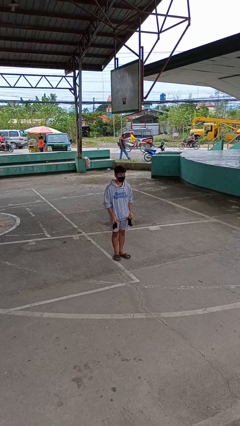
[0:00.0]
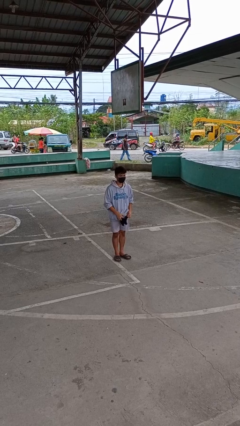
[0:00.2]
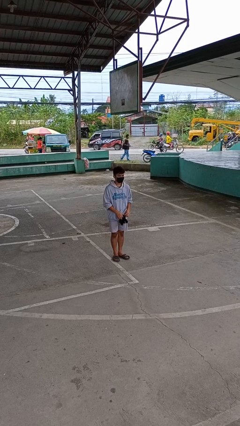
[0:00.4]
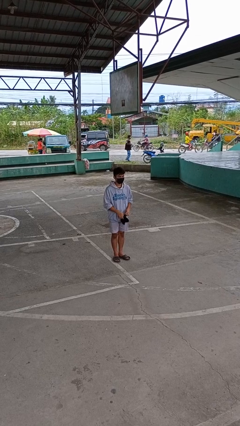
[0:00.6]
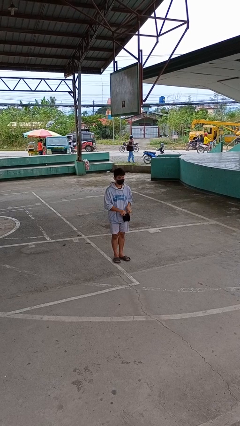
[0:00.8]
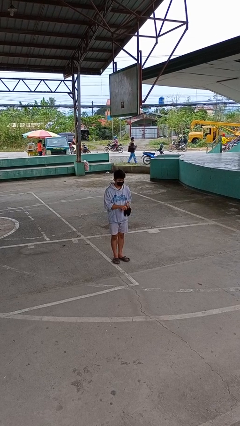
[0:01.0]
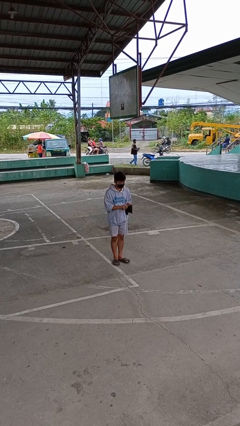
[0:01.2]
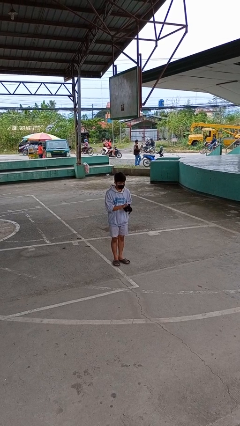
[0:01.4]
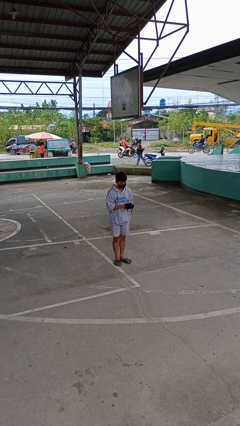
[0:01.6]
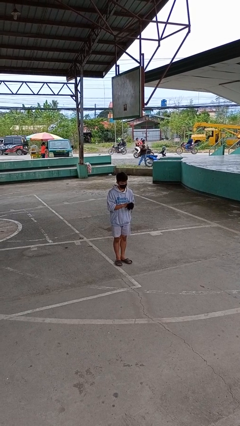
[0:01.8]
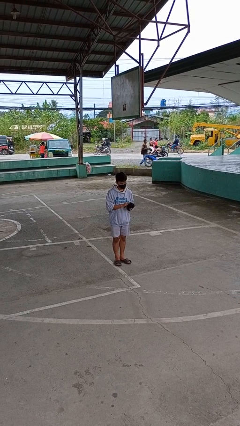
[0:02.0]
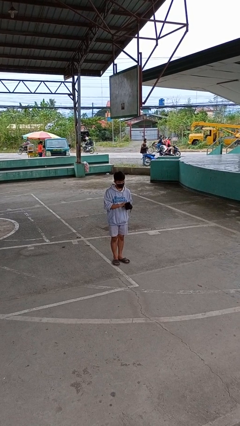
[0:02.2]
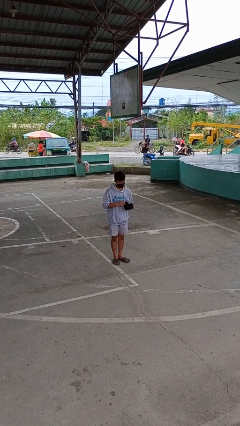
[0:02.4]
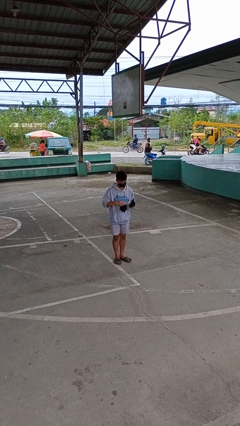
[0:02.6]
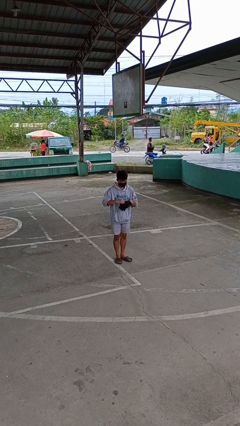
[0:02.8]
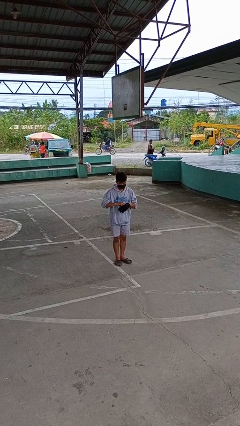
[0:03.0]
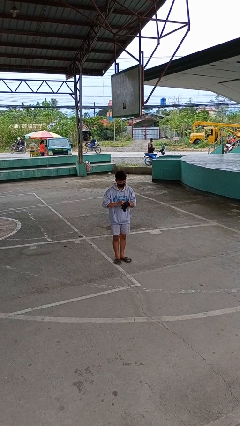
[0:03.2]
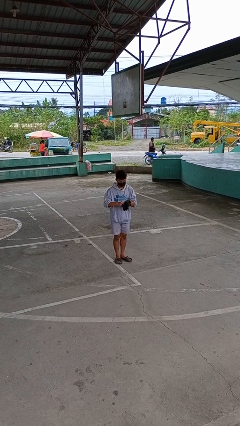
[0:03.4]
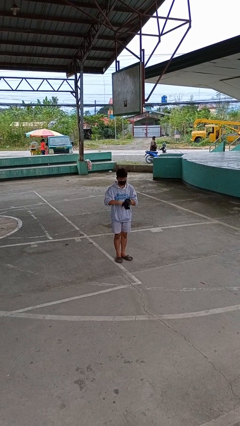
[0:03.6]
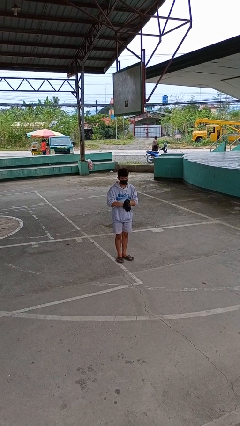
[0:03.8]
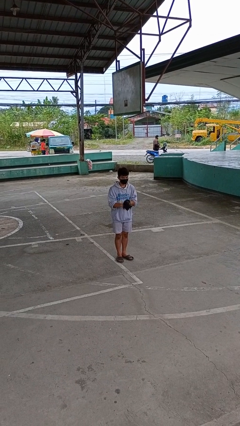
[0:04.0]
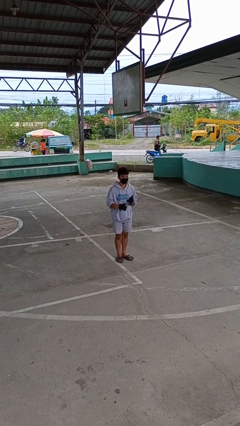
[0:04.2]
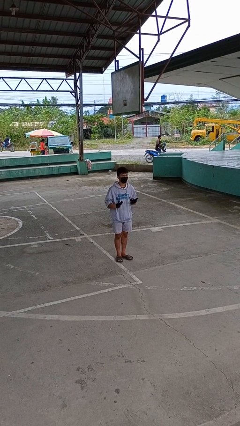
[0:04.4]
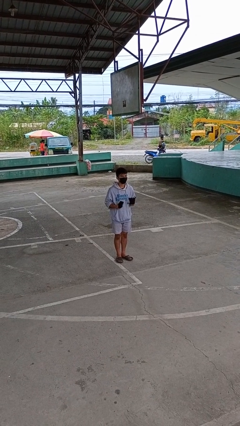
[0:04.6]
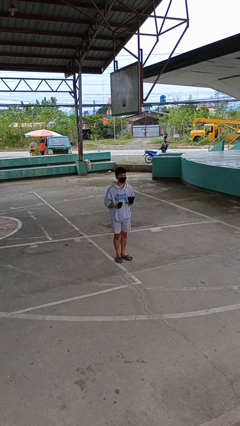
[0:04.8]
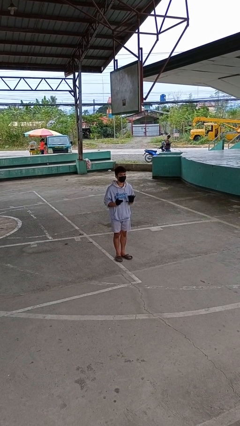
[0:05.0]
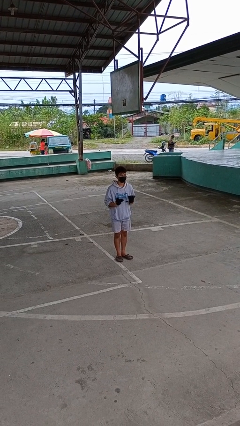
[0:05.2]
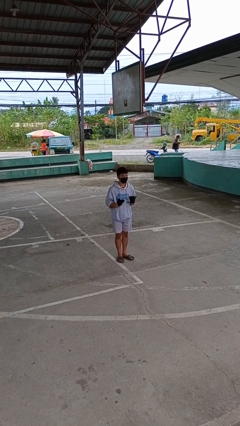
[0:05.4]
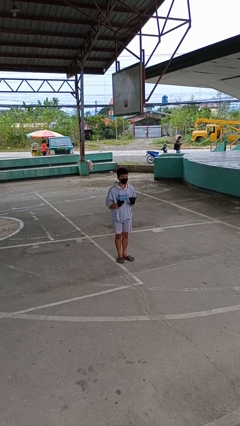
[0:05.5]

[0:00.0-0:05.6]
person puts on gloves

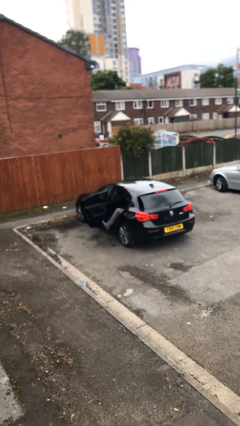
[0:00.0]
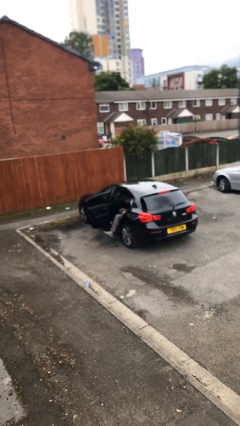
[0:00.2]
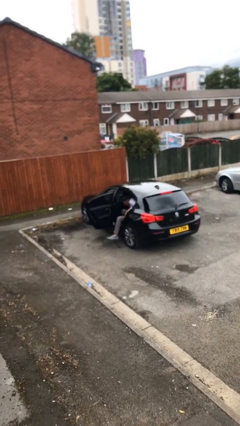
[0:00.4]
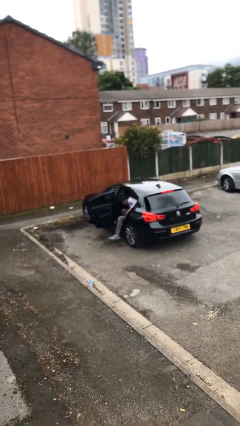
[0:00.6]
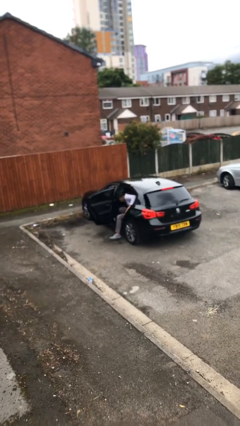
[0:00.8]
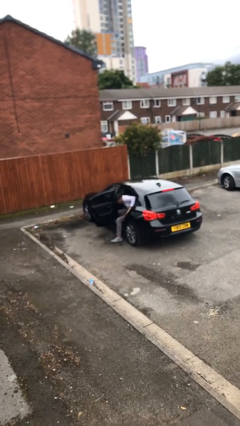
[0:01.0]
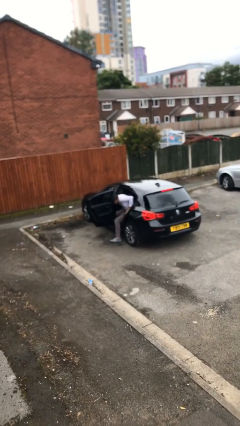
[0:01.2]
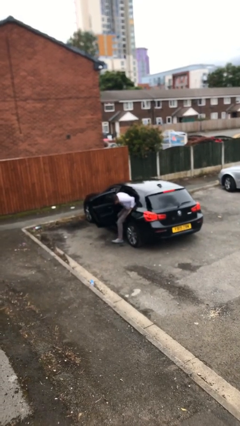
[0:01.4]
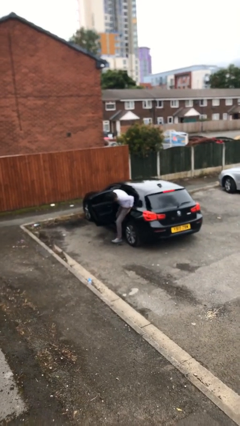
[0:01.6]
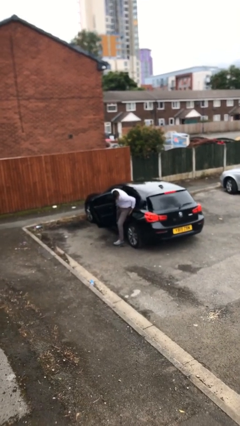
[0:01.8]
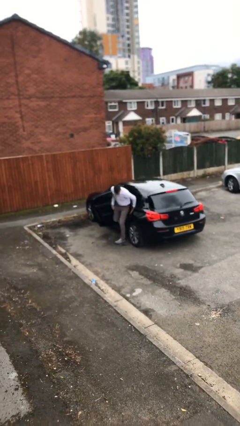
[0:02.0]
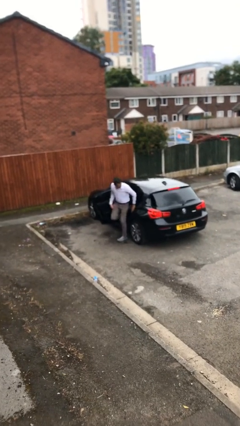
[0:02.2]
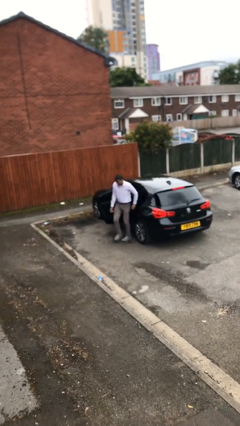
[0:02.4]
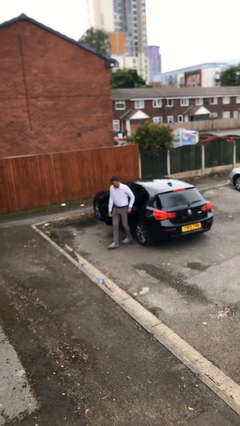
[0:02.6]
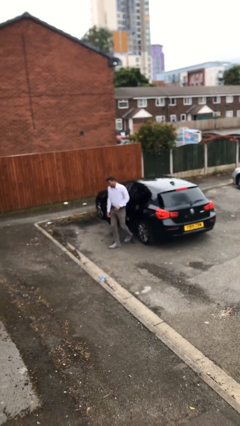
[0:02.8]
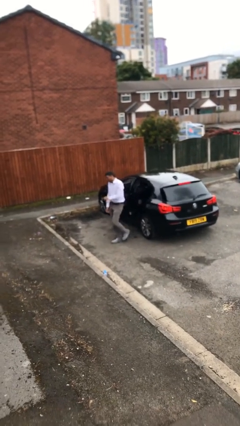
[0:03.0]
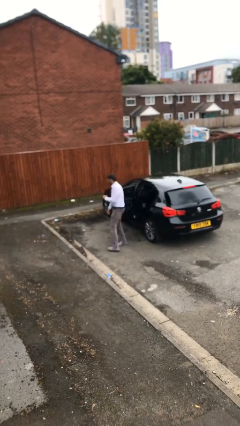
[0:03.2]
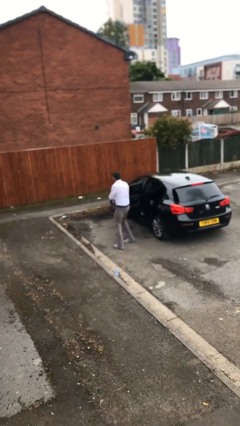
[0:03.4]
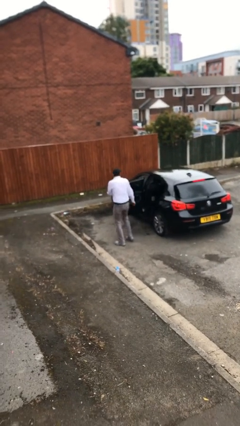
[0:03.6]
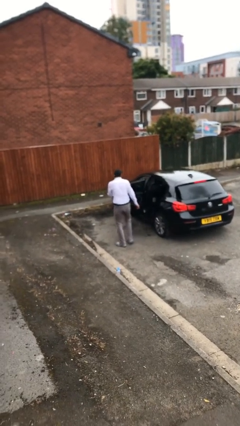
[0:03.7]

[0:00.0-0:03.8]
person exits car

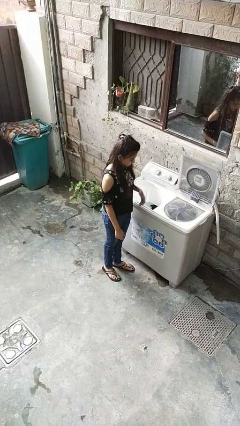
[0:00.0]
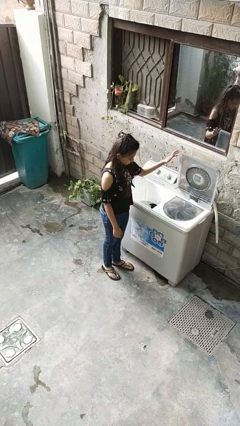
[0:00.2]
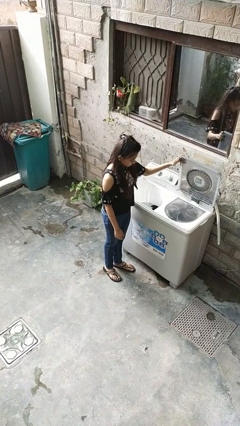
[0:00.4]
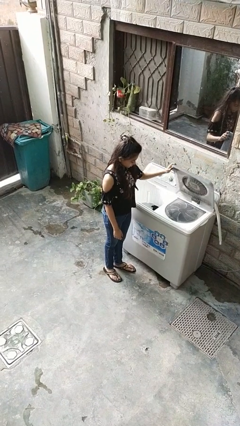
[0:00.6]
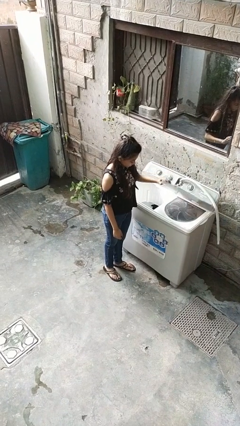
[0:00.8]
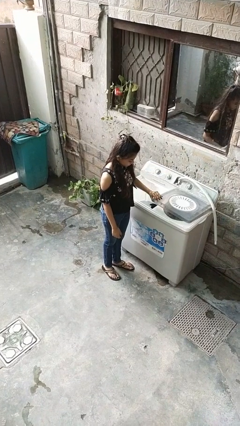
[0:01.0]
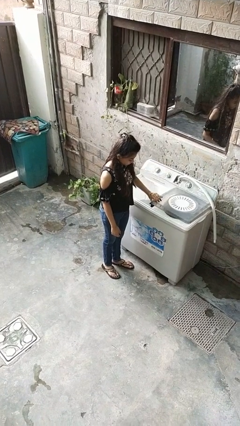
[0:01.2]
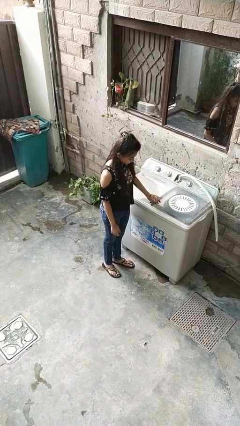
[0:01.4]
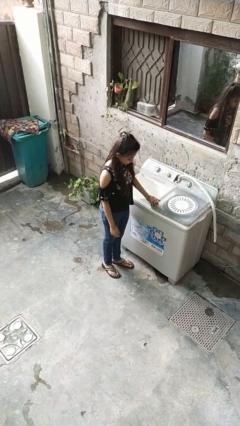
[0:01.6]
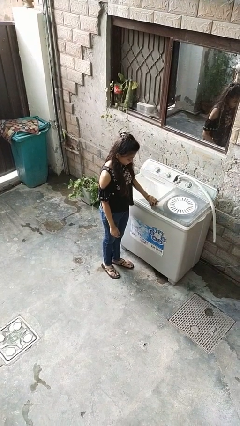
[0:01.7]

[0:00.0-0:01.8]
person closes clothes washer

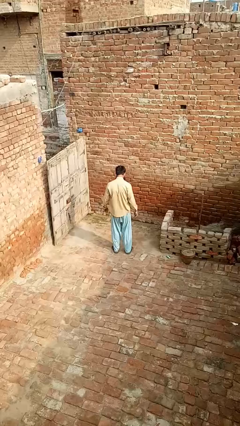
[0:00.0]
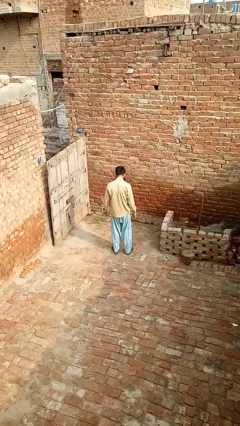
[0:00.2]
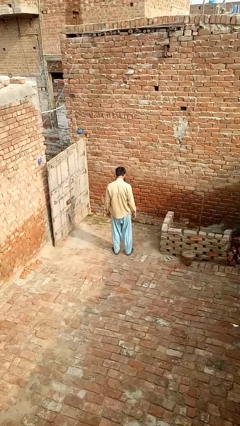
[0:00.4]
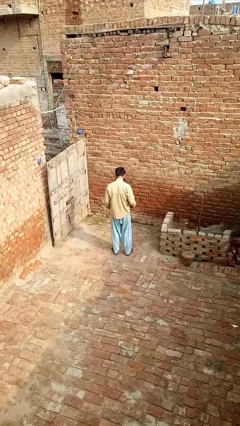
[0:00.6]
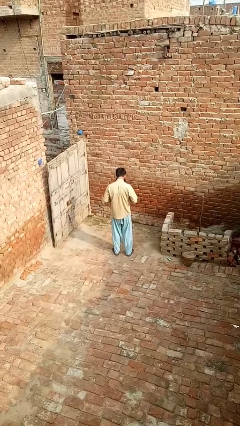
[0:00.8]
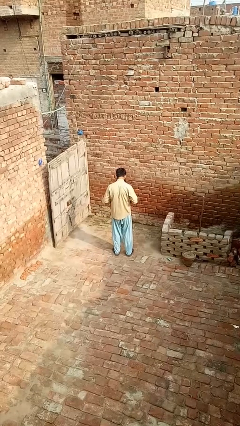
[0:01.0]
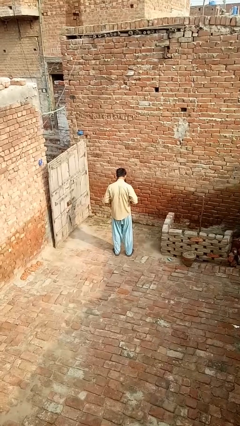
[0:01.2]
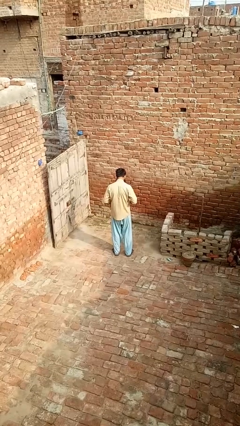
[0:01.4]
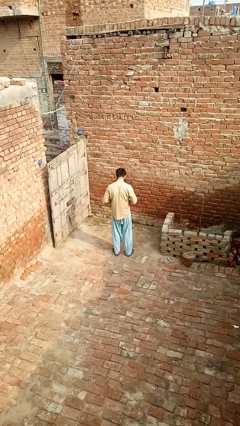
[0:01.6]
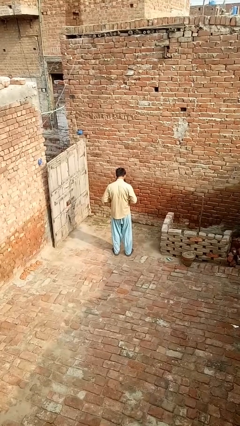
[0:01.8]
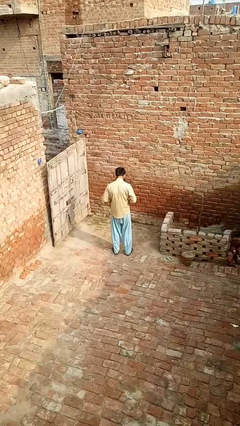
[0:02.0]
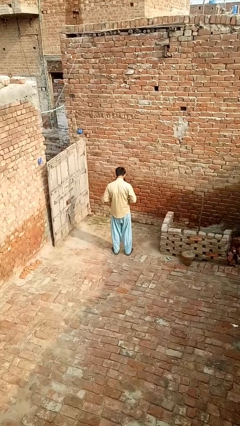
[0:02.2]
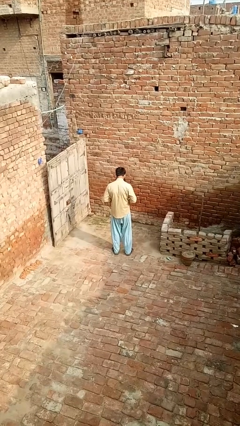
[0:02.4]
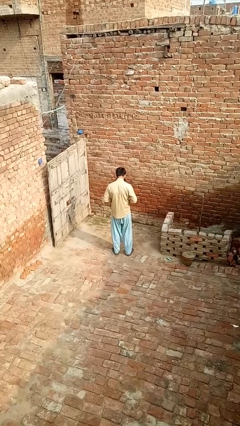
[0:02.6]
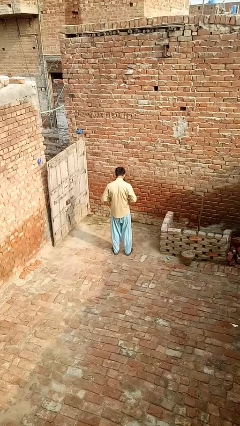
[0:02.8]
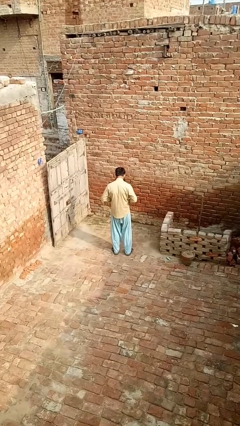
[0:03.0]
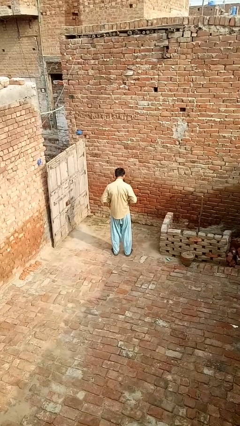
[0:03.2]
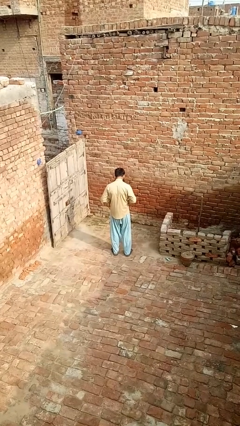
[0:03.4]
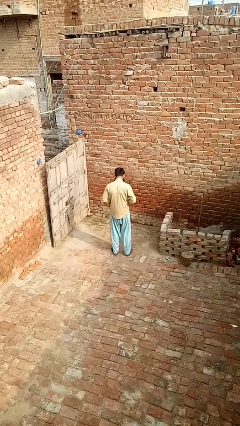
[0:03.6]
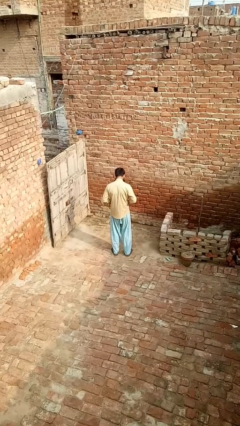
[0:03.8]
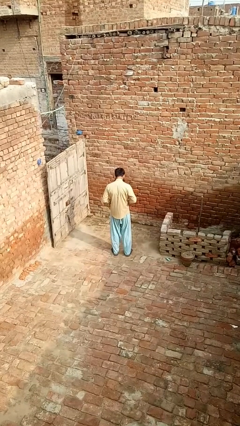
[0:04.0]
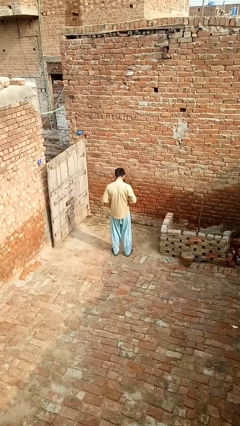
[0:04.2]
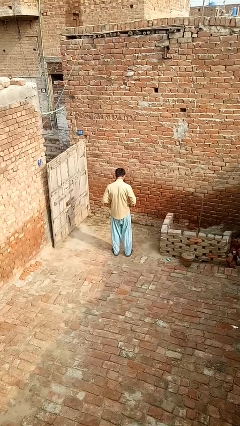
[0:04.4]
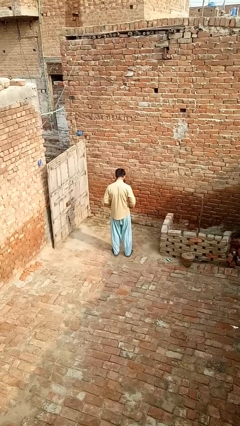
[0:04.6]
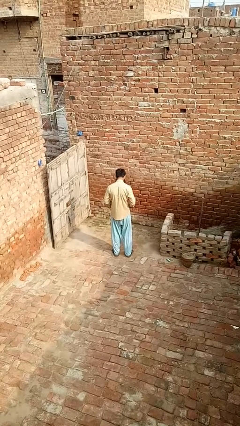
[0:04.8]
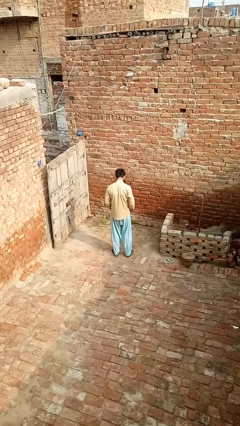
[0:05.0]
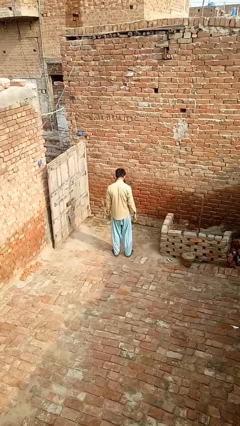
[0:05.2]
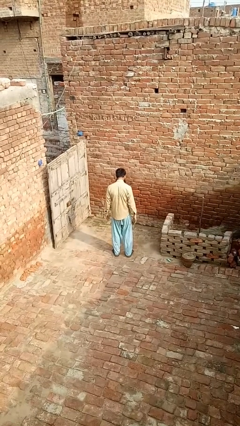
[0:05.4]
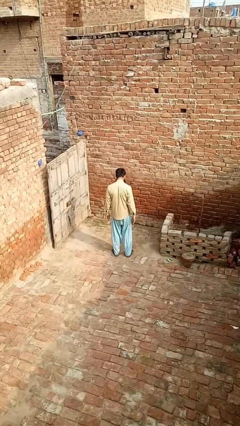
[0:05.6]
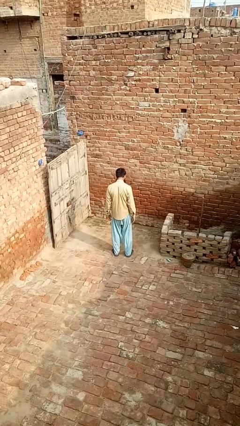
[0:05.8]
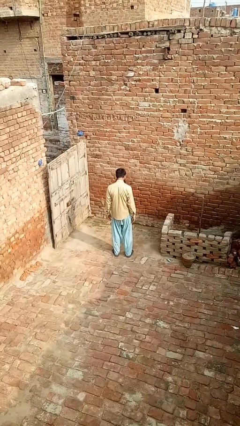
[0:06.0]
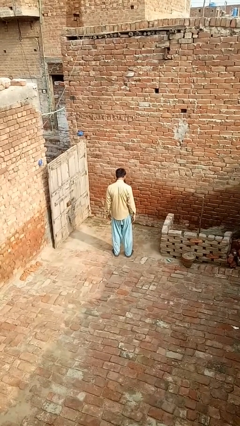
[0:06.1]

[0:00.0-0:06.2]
person buttons shirt

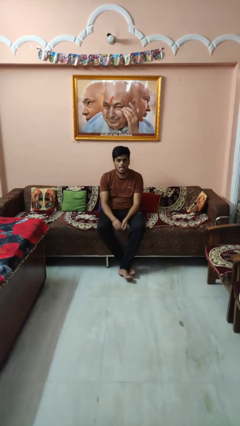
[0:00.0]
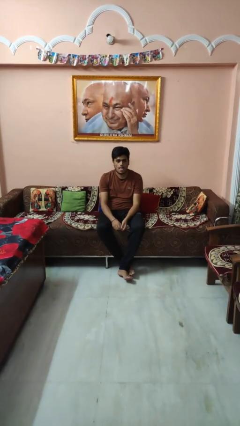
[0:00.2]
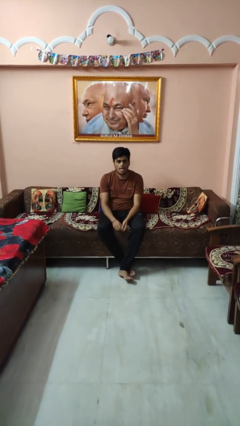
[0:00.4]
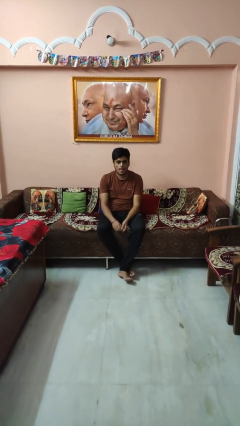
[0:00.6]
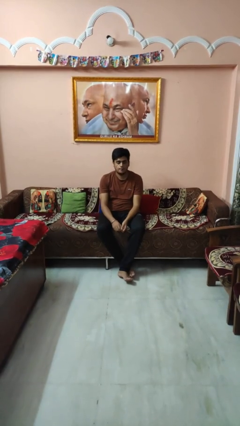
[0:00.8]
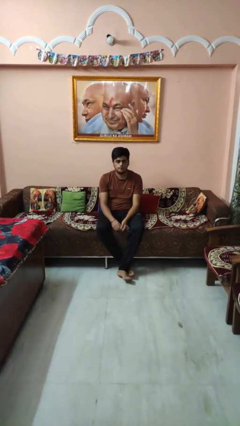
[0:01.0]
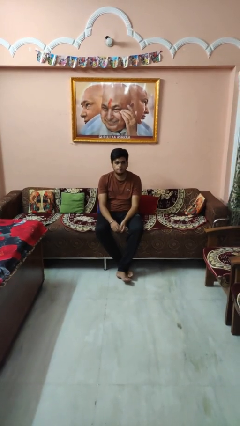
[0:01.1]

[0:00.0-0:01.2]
person sticks out tongue
